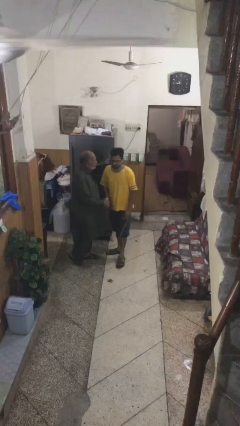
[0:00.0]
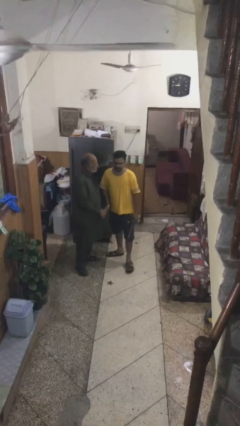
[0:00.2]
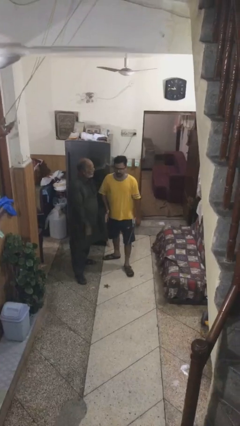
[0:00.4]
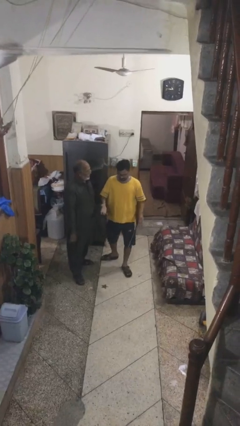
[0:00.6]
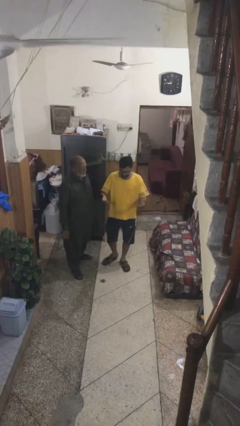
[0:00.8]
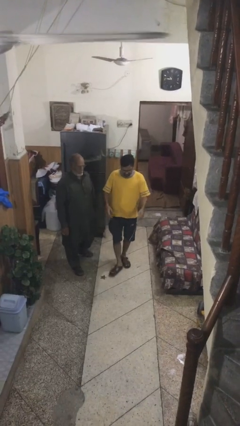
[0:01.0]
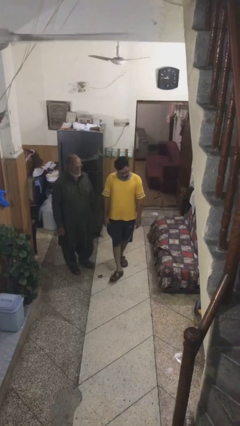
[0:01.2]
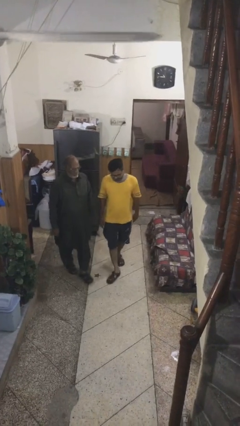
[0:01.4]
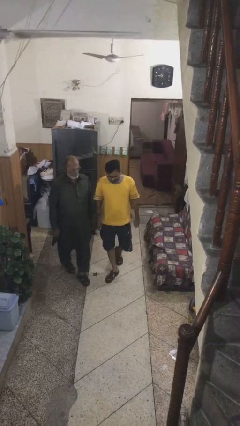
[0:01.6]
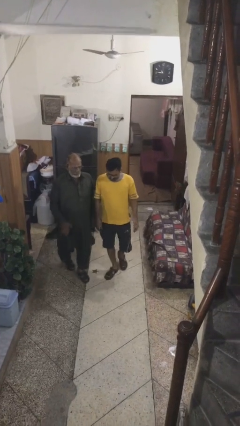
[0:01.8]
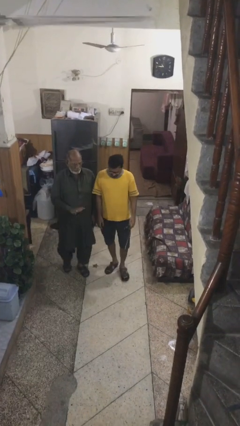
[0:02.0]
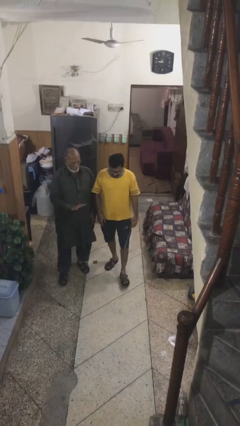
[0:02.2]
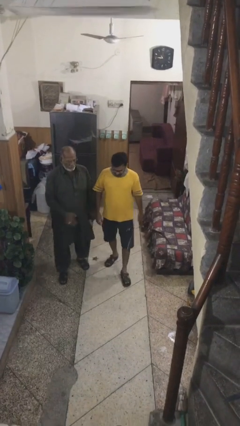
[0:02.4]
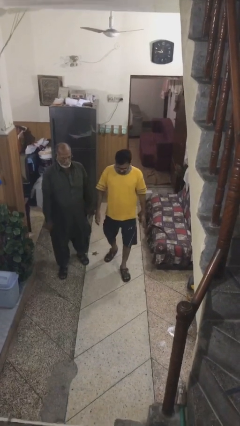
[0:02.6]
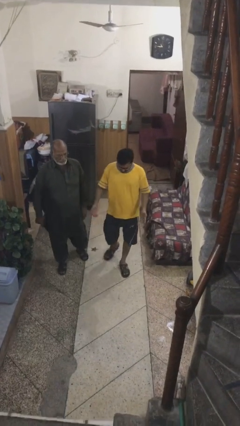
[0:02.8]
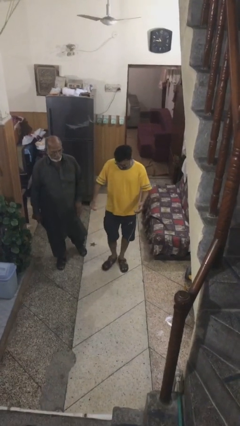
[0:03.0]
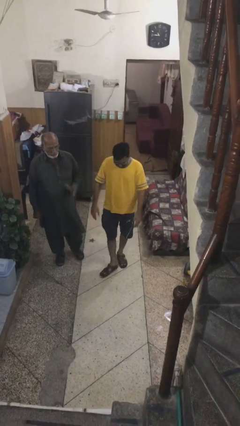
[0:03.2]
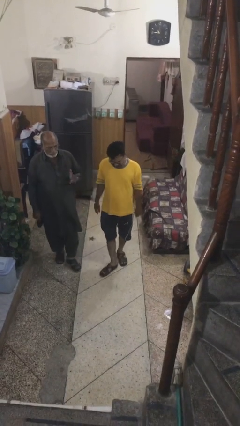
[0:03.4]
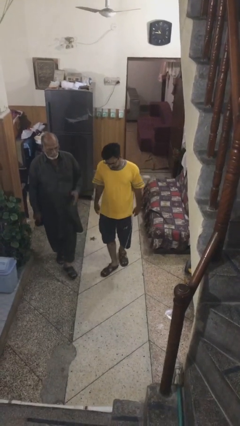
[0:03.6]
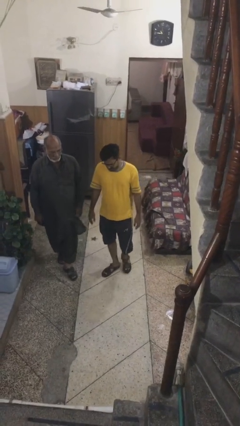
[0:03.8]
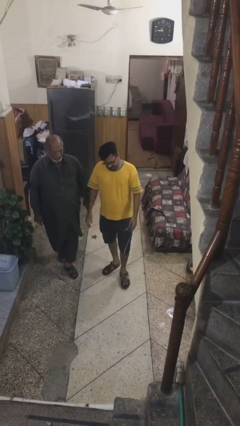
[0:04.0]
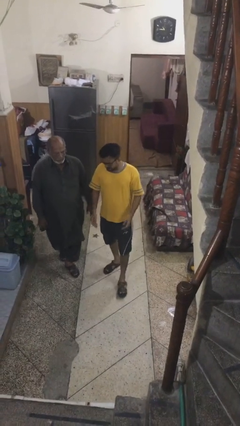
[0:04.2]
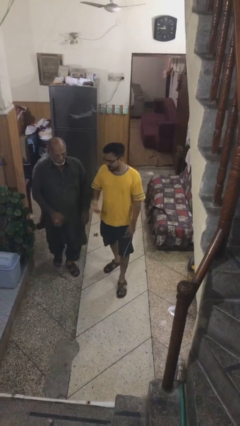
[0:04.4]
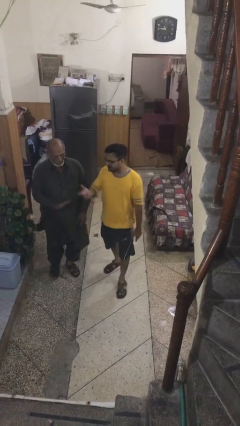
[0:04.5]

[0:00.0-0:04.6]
person talks to person

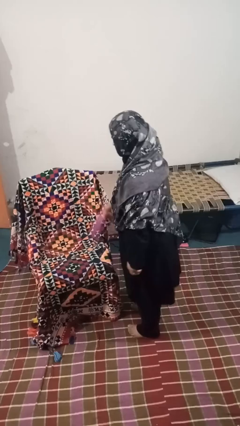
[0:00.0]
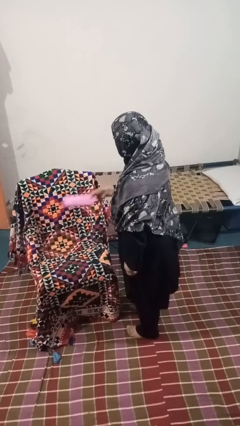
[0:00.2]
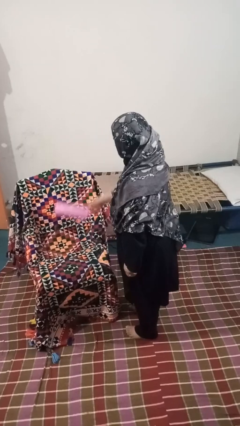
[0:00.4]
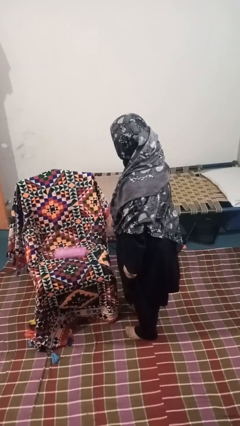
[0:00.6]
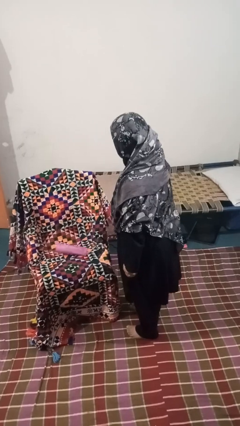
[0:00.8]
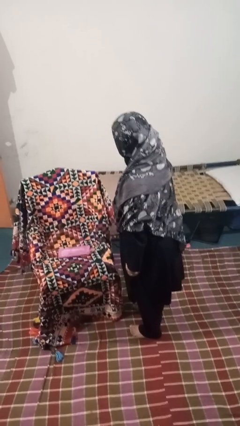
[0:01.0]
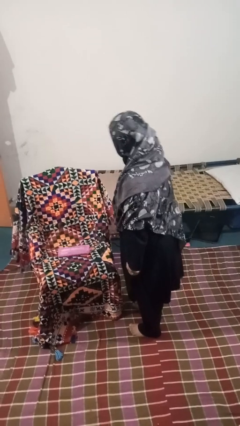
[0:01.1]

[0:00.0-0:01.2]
person picks up object from couch

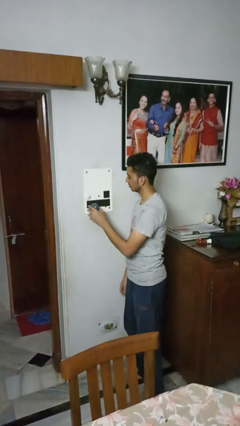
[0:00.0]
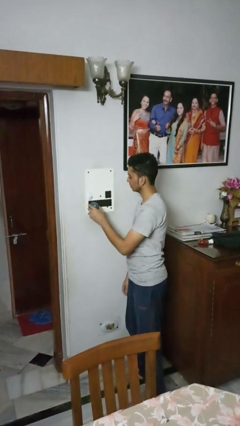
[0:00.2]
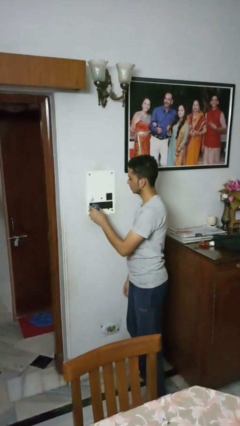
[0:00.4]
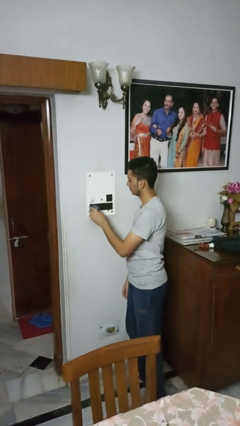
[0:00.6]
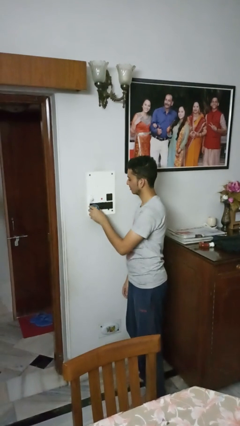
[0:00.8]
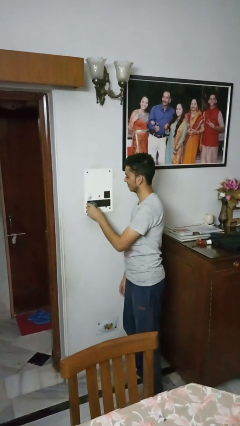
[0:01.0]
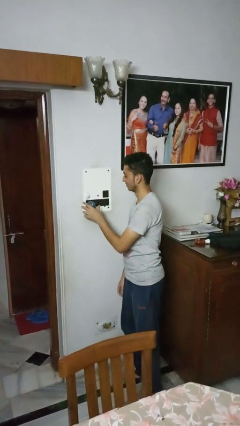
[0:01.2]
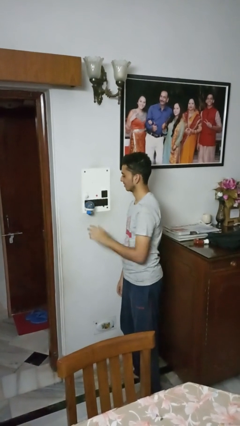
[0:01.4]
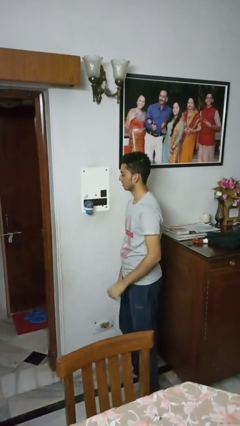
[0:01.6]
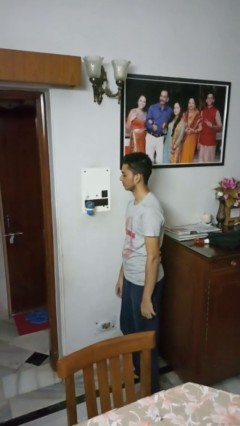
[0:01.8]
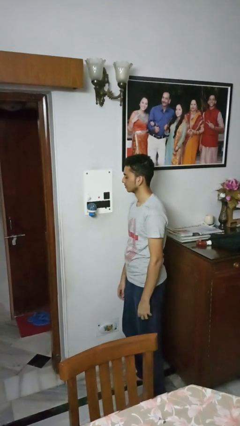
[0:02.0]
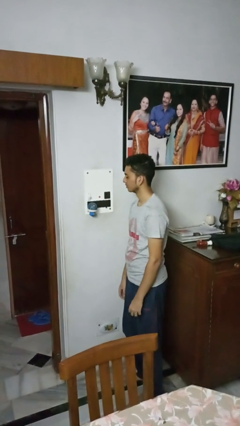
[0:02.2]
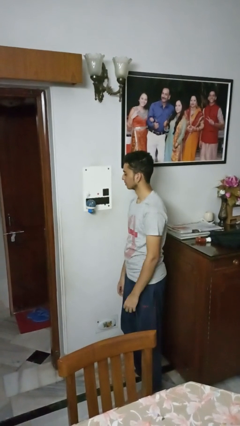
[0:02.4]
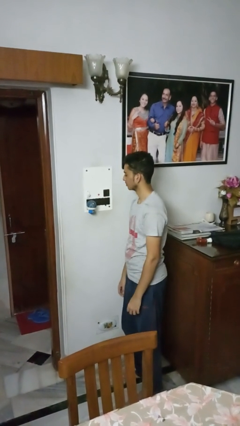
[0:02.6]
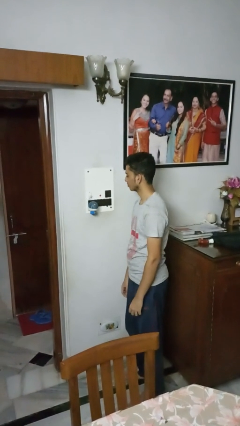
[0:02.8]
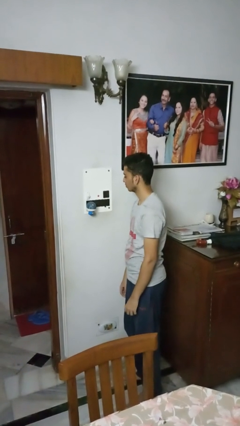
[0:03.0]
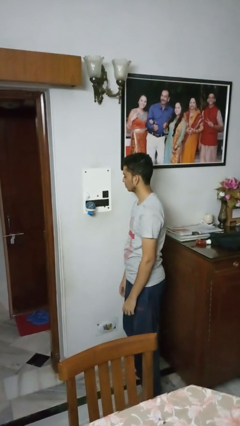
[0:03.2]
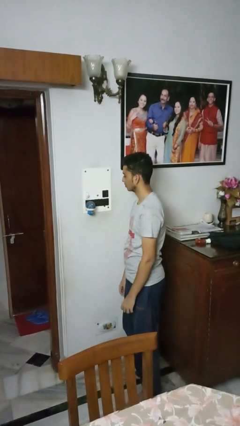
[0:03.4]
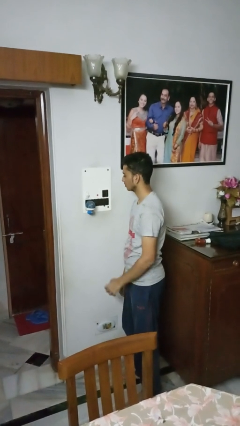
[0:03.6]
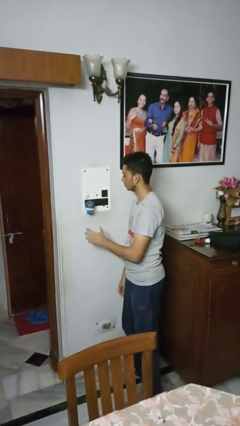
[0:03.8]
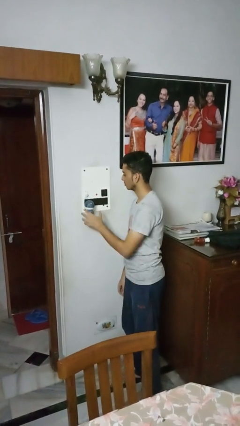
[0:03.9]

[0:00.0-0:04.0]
person plugs into electrical socket

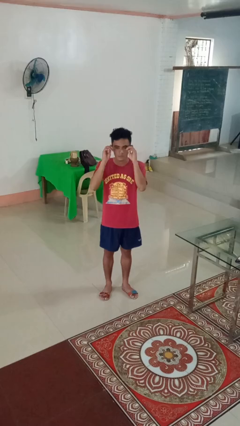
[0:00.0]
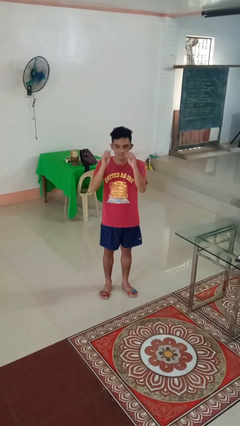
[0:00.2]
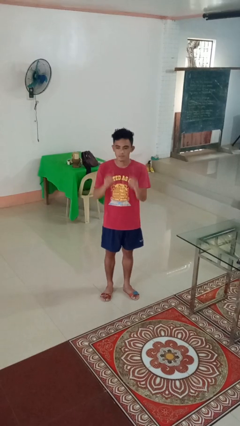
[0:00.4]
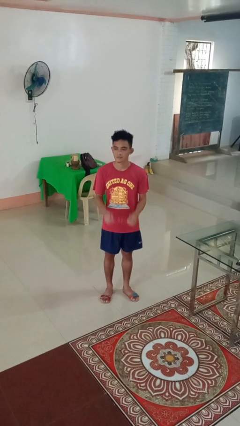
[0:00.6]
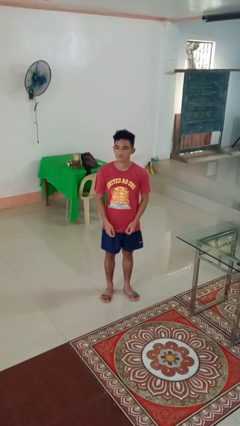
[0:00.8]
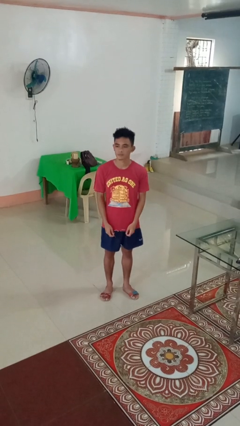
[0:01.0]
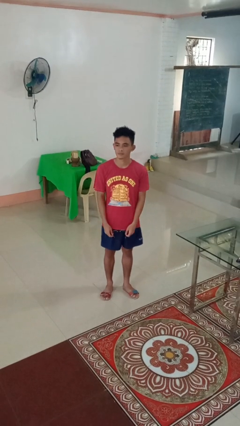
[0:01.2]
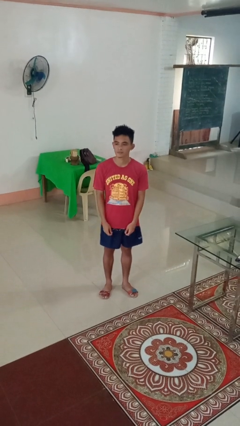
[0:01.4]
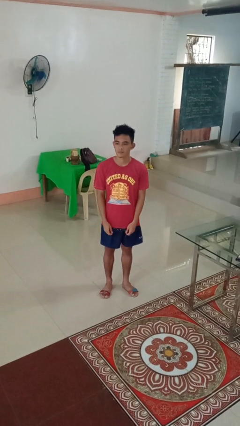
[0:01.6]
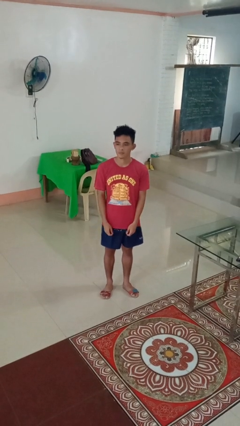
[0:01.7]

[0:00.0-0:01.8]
person takes off glasses

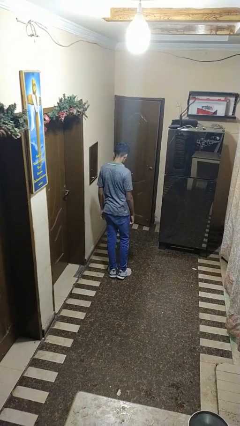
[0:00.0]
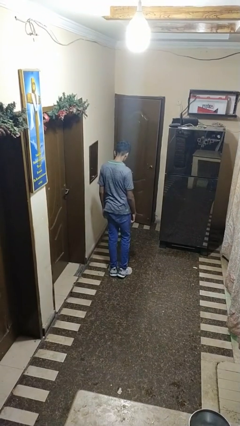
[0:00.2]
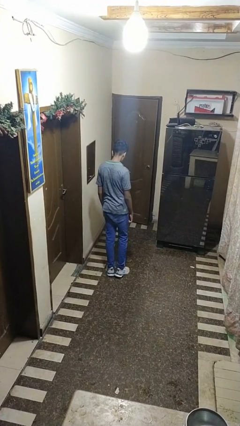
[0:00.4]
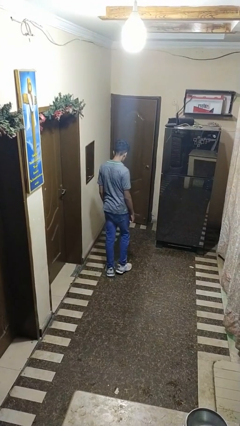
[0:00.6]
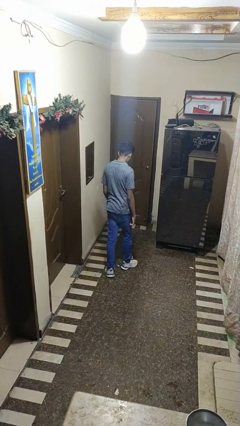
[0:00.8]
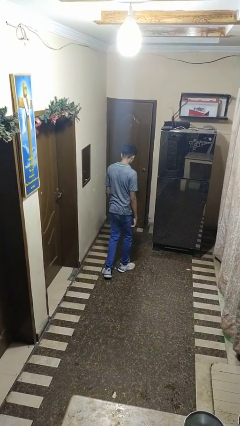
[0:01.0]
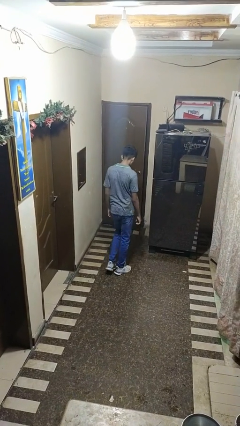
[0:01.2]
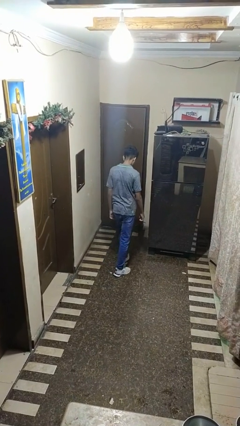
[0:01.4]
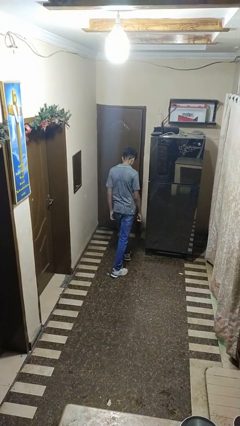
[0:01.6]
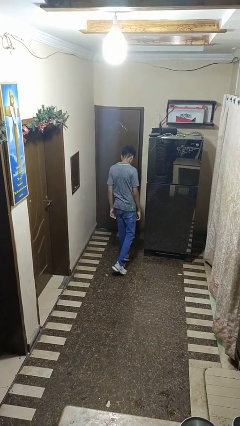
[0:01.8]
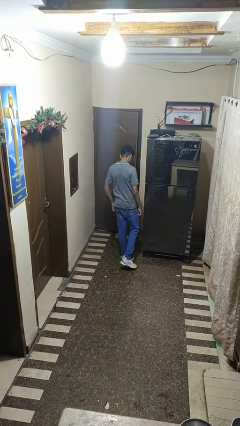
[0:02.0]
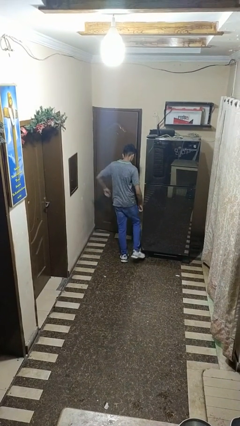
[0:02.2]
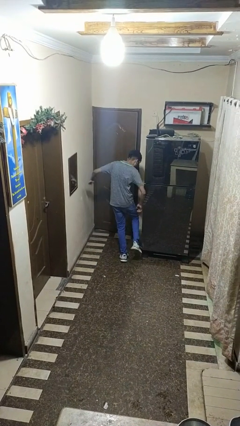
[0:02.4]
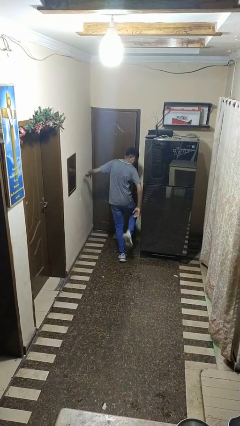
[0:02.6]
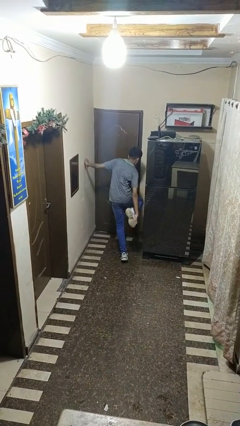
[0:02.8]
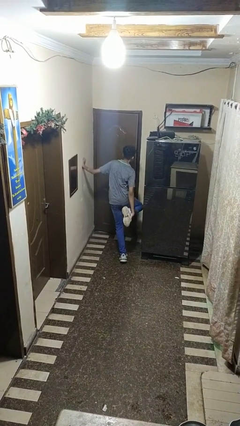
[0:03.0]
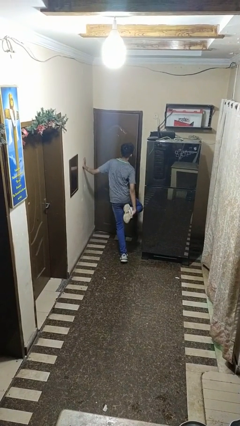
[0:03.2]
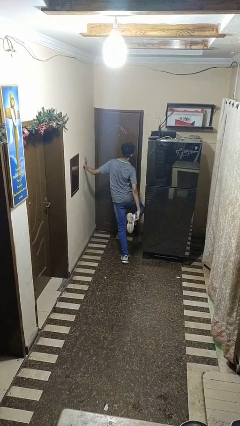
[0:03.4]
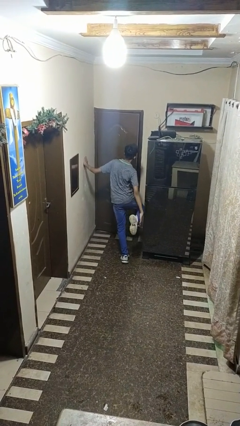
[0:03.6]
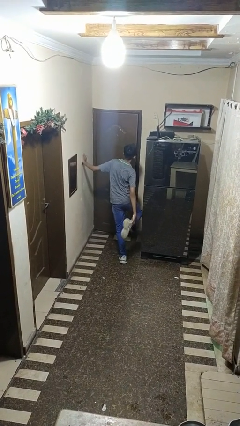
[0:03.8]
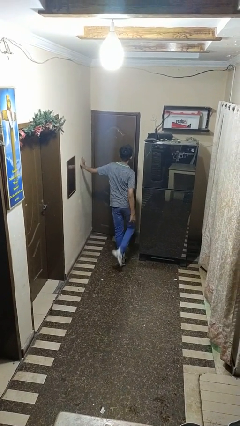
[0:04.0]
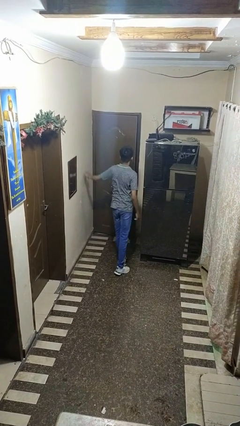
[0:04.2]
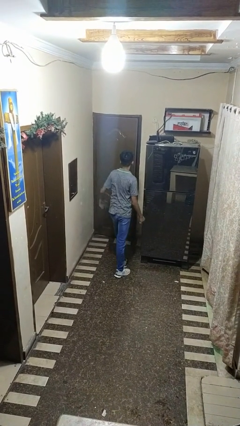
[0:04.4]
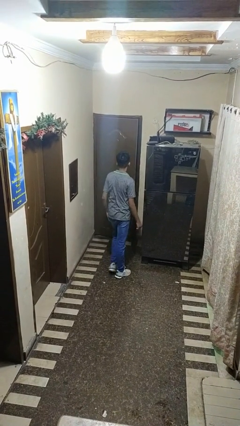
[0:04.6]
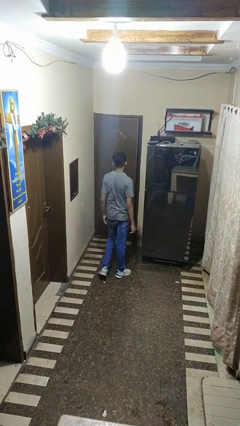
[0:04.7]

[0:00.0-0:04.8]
person stubs toe

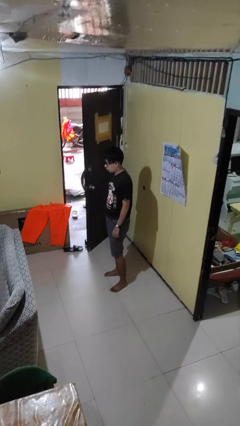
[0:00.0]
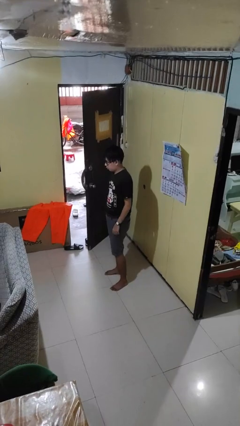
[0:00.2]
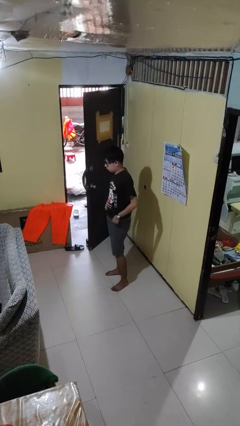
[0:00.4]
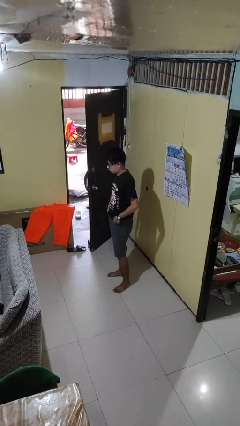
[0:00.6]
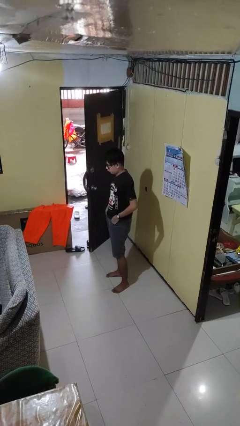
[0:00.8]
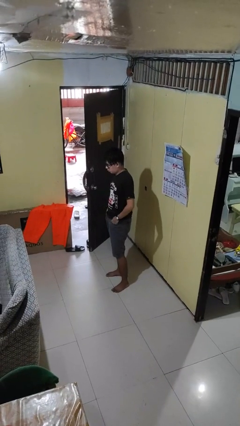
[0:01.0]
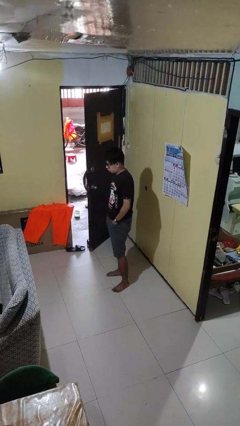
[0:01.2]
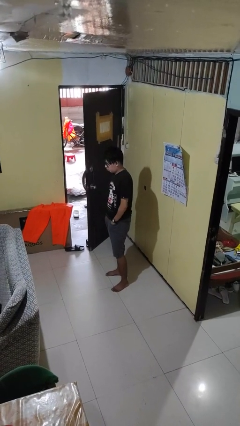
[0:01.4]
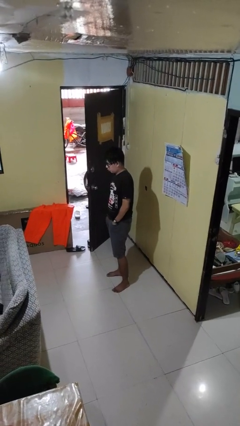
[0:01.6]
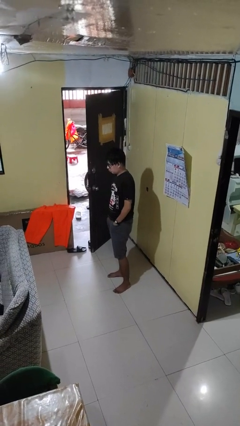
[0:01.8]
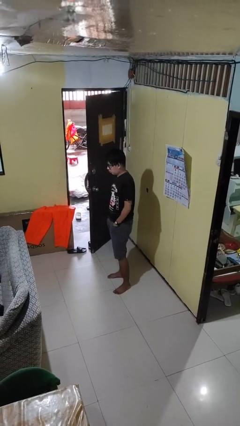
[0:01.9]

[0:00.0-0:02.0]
person puts hands in back pockets
